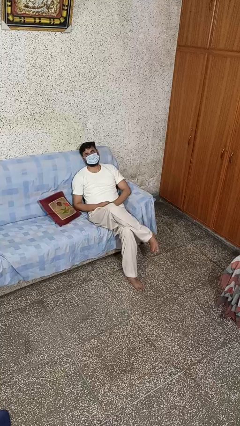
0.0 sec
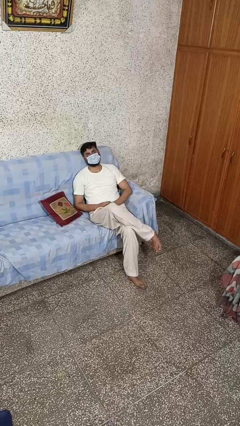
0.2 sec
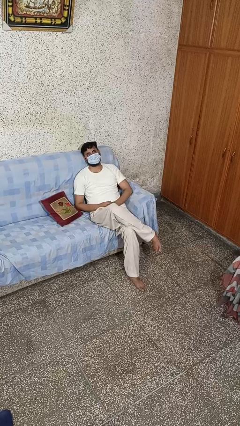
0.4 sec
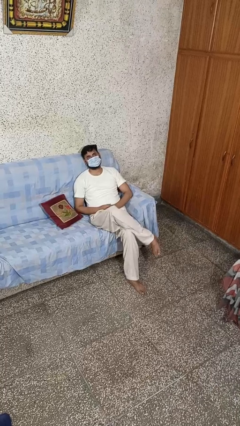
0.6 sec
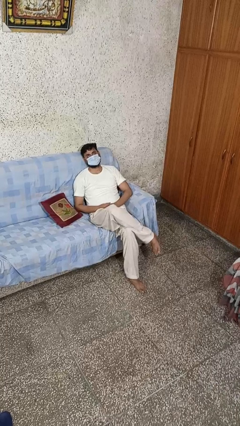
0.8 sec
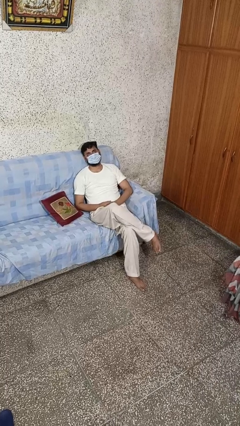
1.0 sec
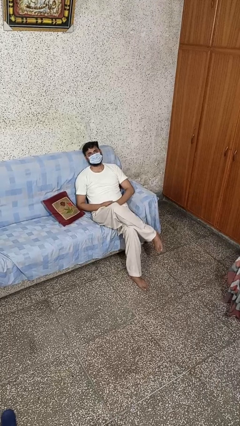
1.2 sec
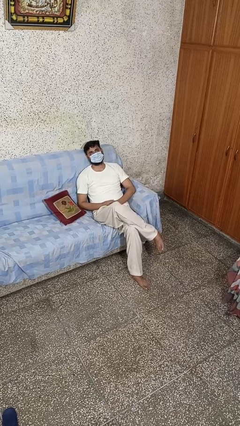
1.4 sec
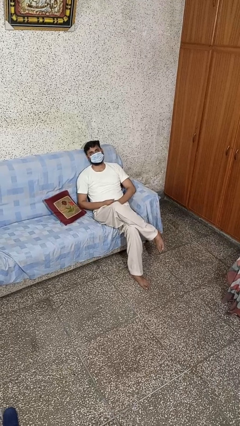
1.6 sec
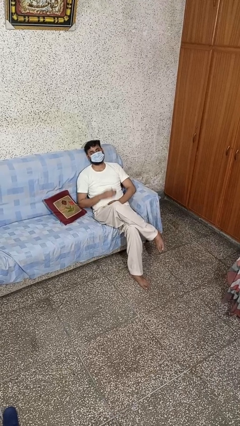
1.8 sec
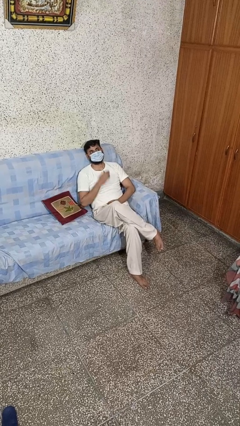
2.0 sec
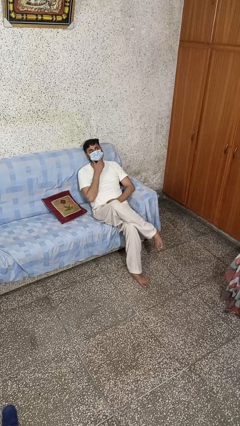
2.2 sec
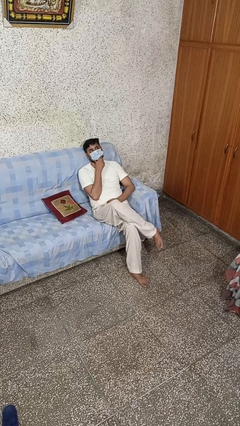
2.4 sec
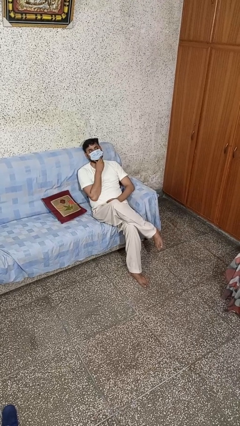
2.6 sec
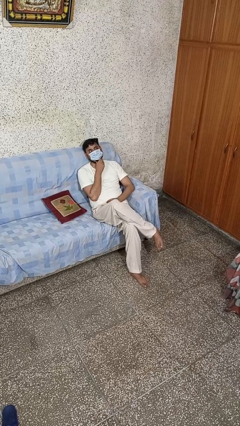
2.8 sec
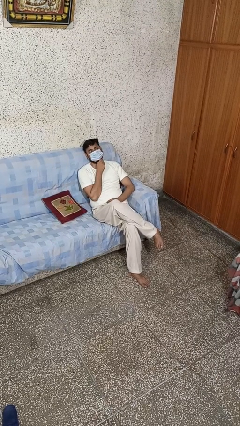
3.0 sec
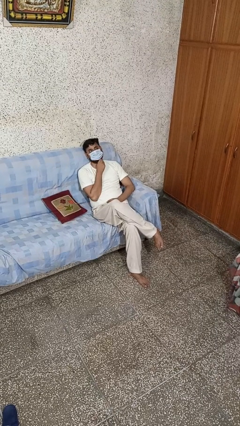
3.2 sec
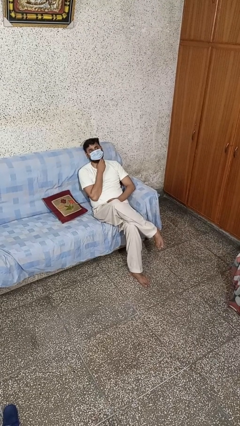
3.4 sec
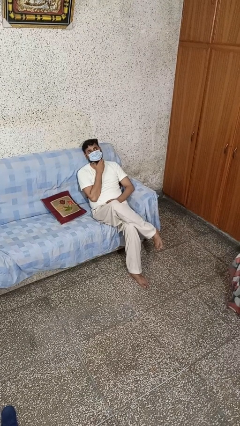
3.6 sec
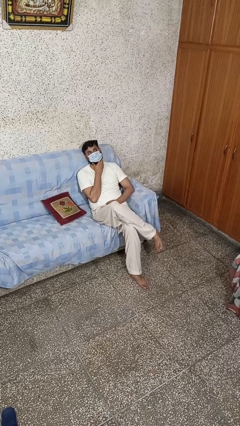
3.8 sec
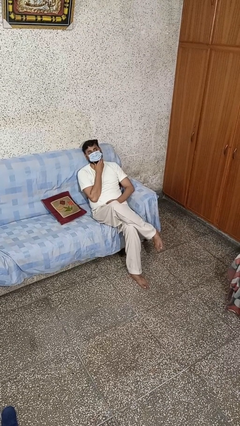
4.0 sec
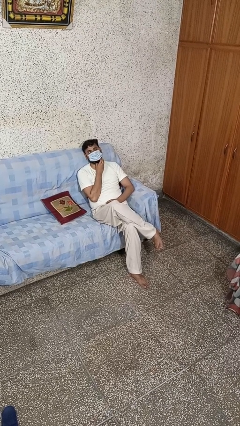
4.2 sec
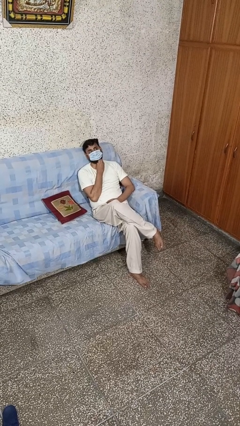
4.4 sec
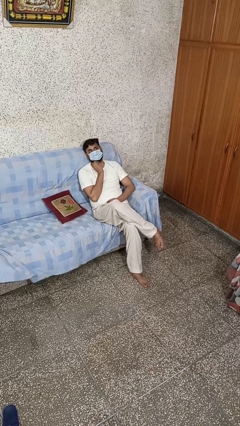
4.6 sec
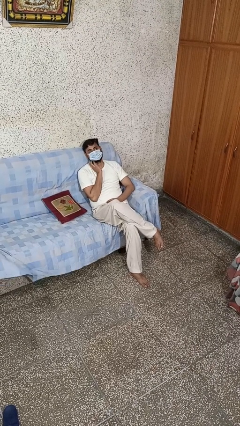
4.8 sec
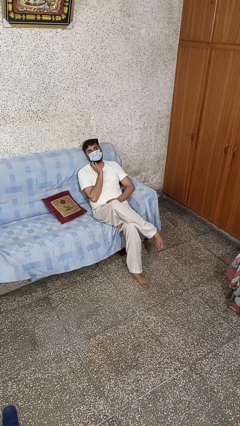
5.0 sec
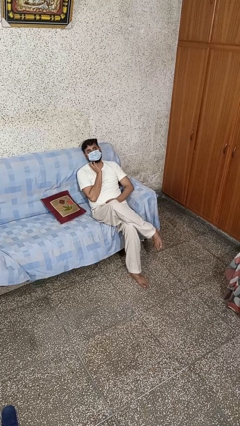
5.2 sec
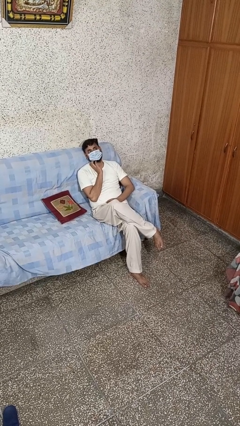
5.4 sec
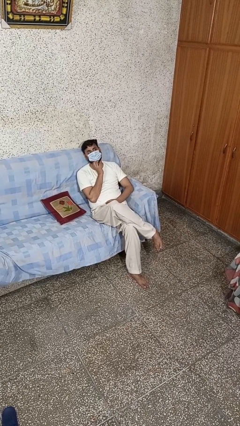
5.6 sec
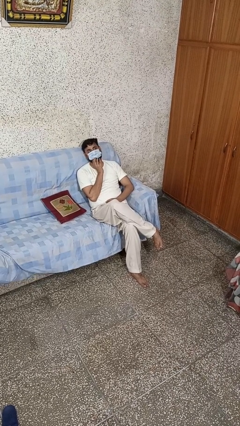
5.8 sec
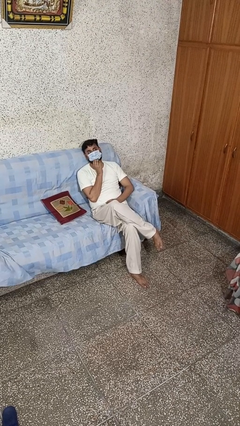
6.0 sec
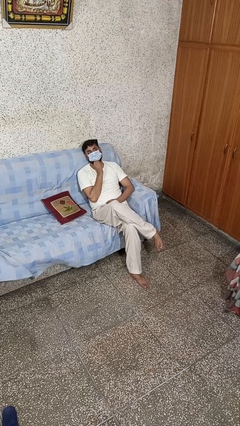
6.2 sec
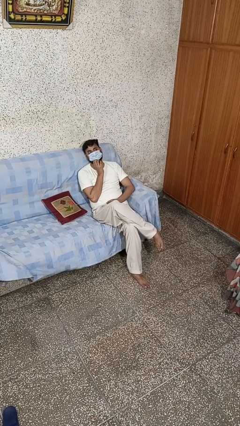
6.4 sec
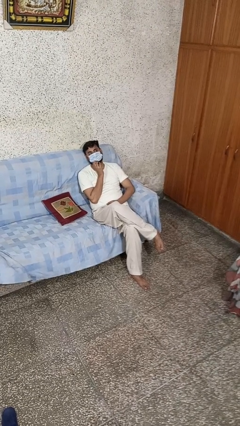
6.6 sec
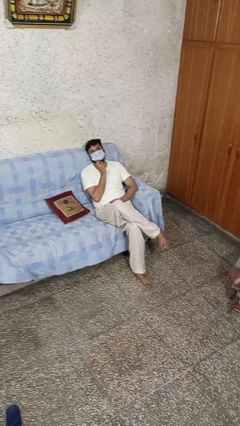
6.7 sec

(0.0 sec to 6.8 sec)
person strokes chin

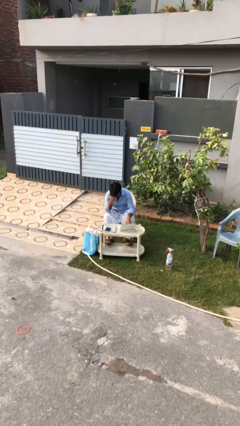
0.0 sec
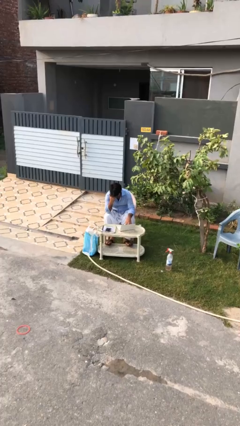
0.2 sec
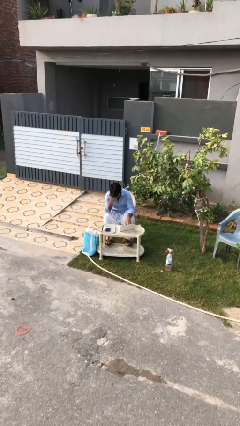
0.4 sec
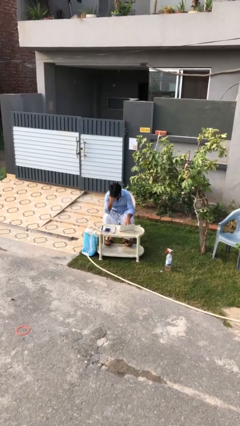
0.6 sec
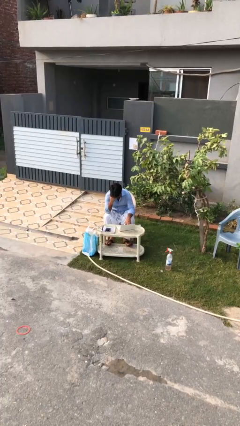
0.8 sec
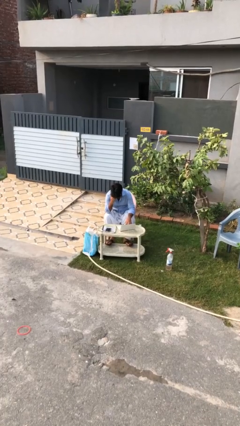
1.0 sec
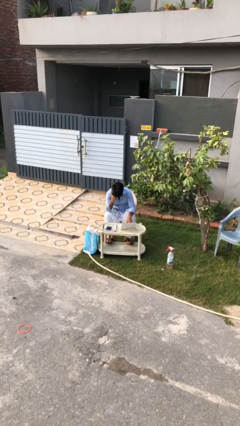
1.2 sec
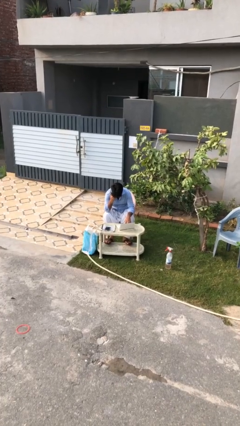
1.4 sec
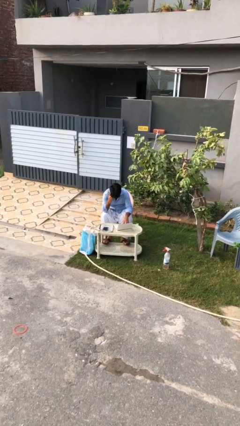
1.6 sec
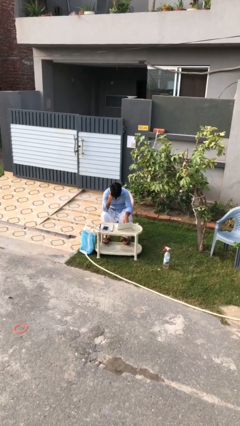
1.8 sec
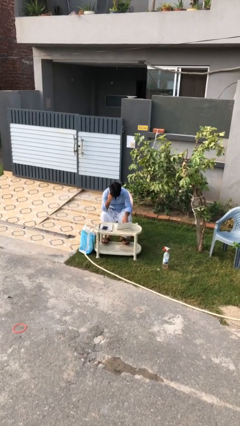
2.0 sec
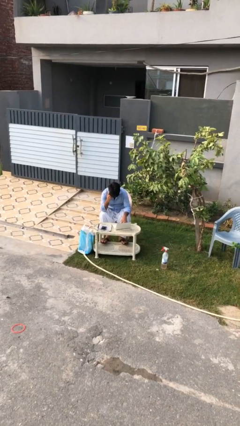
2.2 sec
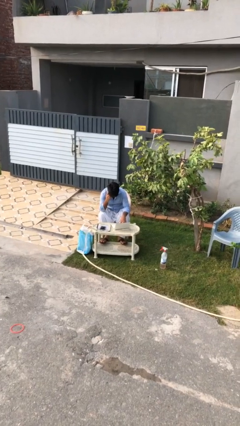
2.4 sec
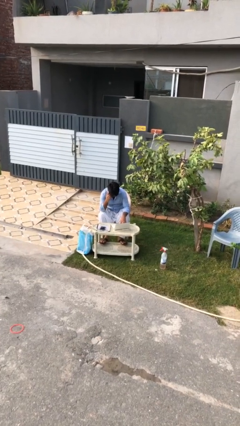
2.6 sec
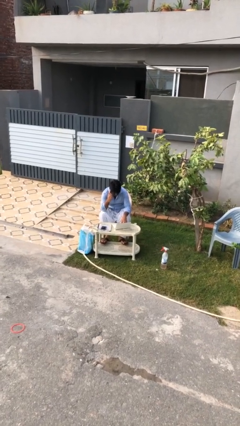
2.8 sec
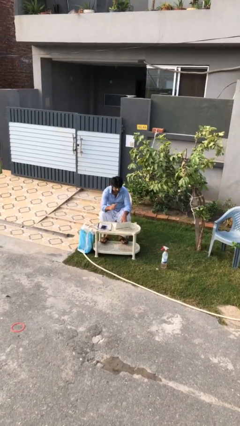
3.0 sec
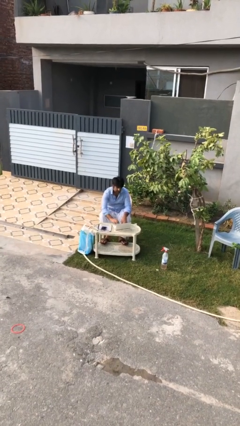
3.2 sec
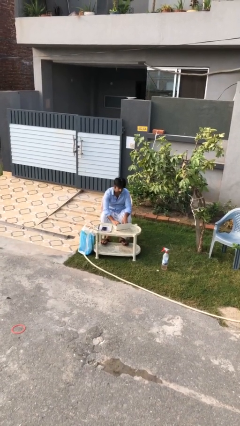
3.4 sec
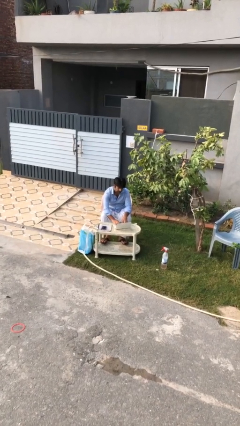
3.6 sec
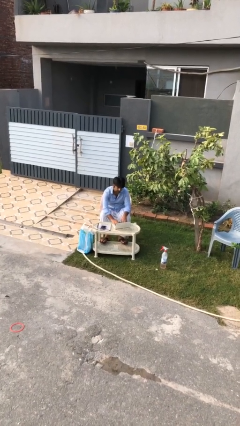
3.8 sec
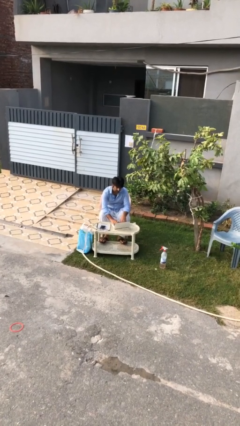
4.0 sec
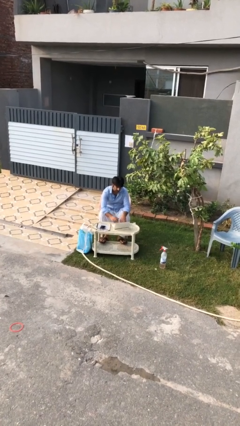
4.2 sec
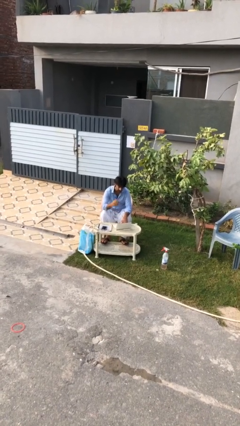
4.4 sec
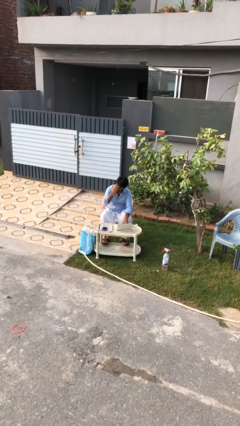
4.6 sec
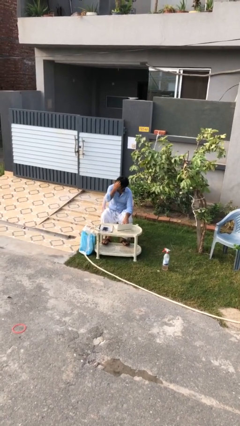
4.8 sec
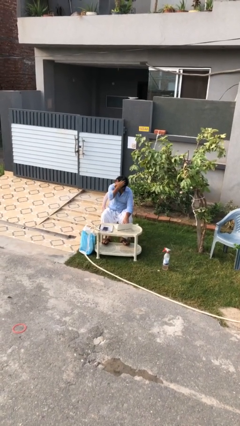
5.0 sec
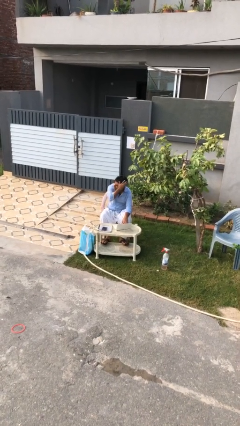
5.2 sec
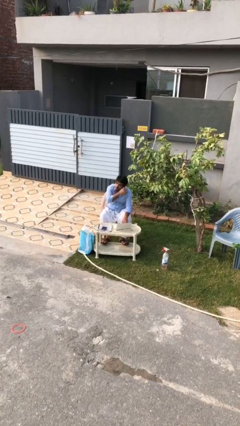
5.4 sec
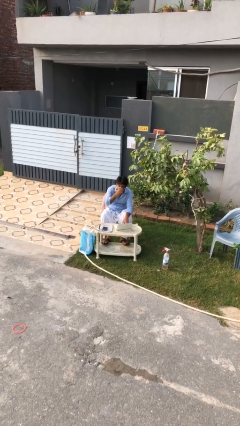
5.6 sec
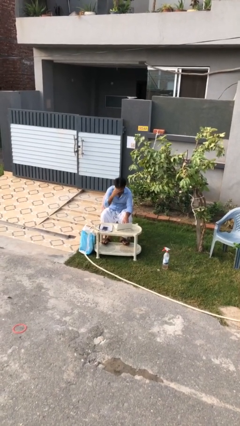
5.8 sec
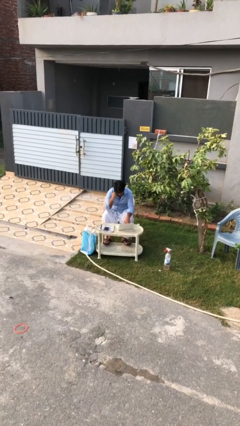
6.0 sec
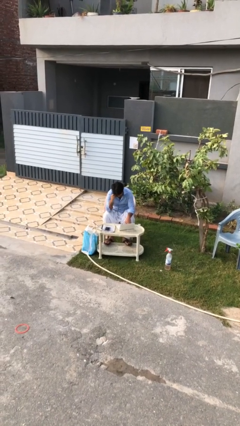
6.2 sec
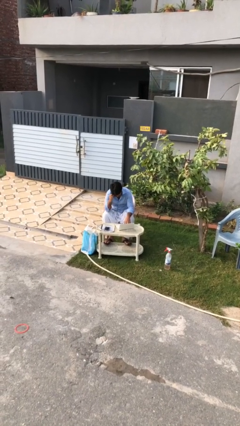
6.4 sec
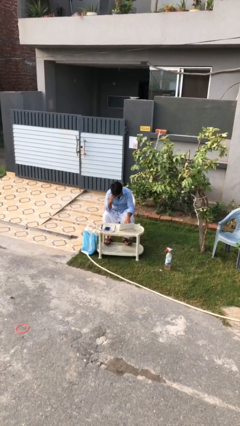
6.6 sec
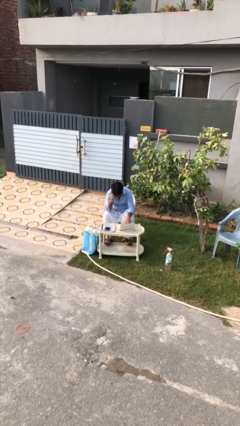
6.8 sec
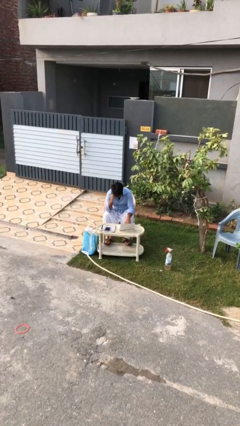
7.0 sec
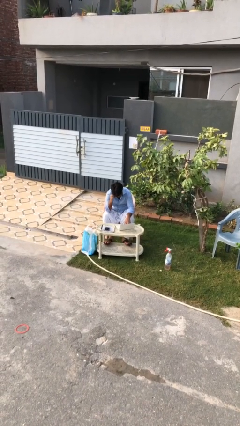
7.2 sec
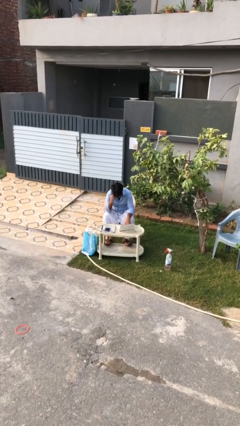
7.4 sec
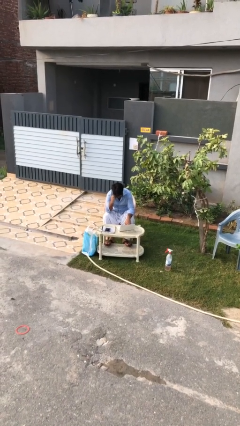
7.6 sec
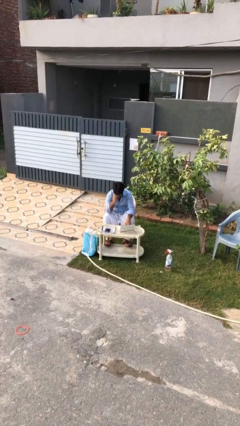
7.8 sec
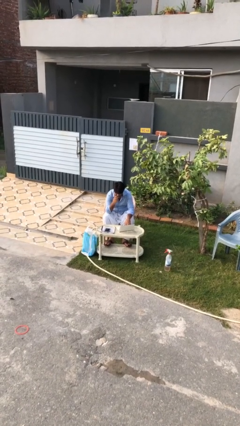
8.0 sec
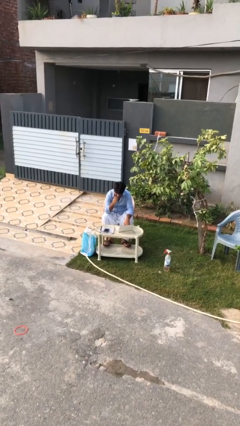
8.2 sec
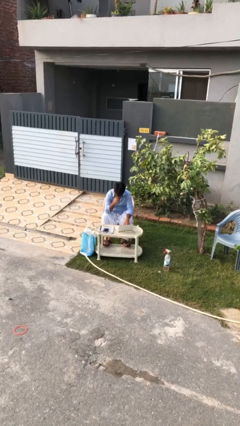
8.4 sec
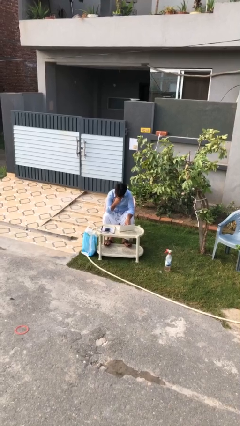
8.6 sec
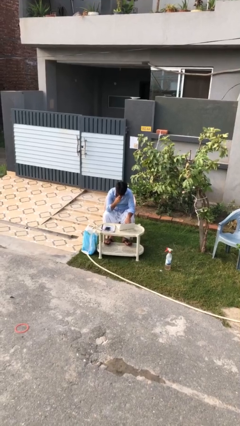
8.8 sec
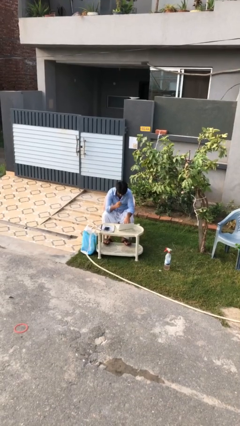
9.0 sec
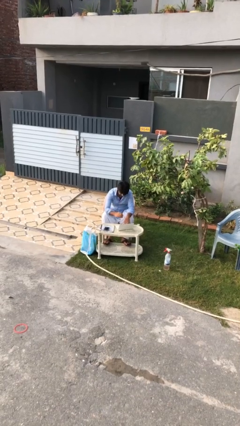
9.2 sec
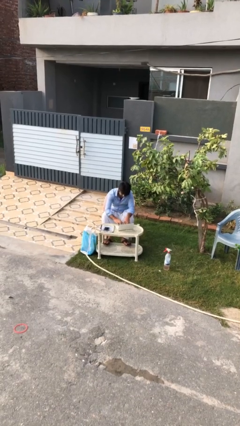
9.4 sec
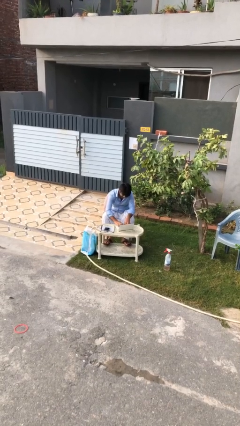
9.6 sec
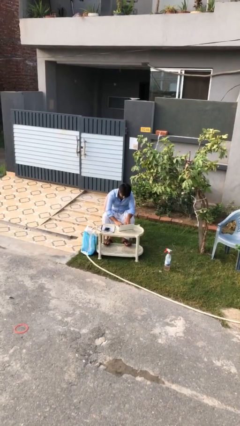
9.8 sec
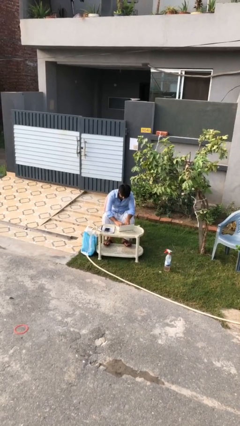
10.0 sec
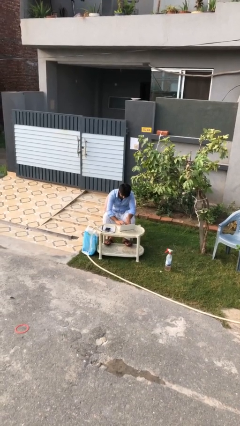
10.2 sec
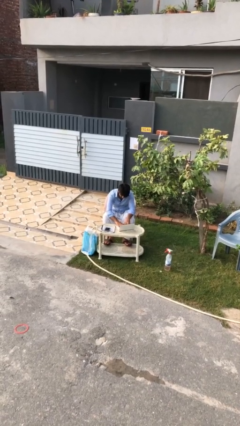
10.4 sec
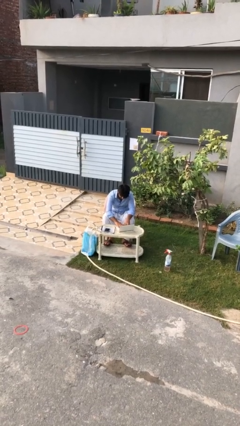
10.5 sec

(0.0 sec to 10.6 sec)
person interacts with laptop

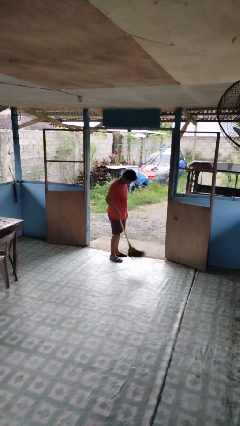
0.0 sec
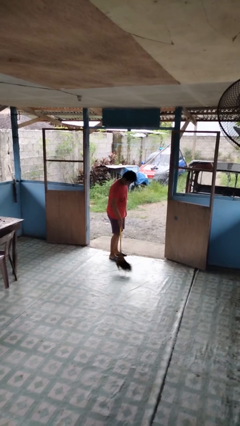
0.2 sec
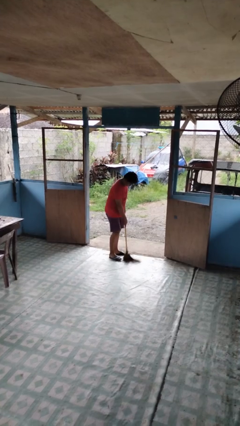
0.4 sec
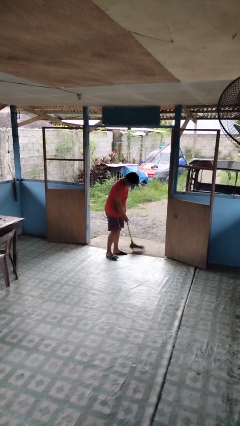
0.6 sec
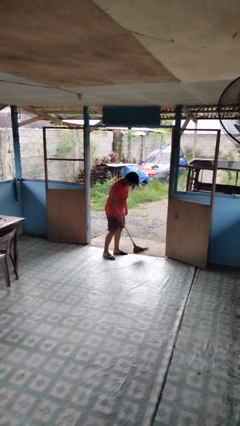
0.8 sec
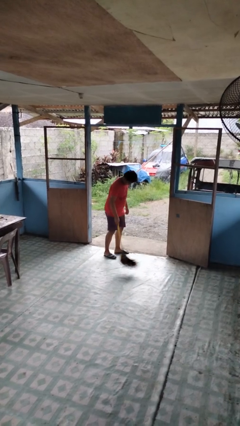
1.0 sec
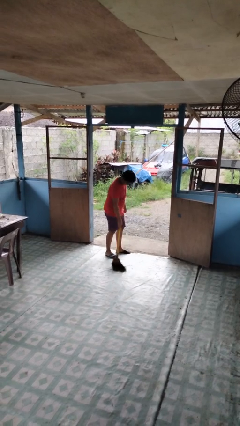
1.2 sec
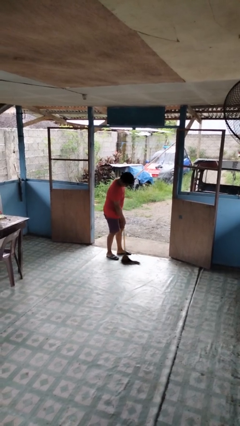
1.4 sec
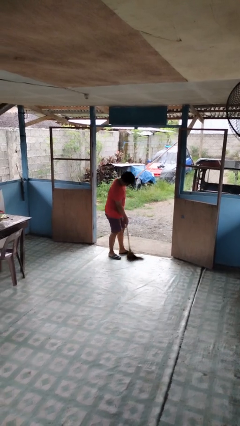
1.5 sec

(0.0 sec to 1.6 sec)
person sweeps floor
